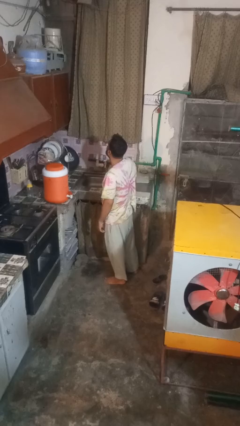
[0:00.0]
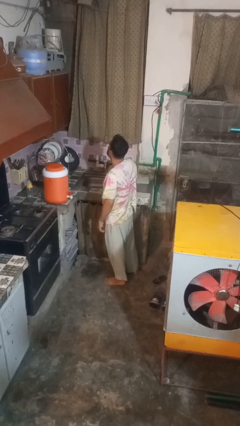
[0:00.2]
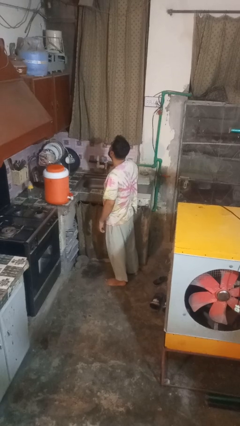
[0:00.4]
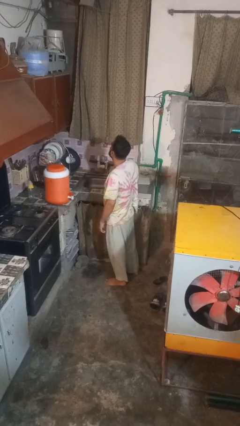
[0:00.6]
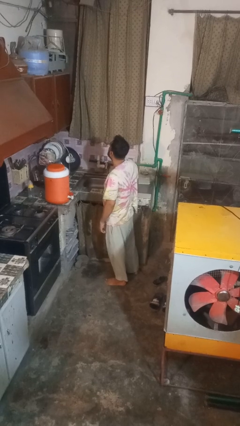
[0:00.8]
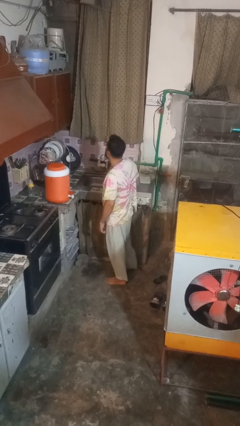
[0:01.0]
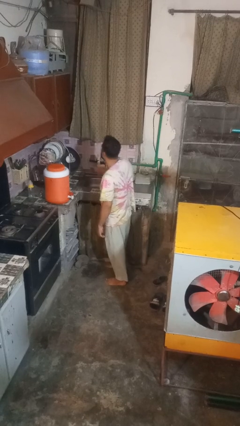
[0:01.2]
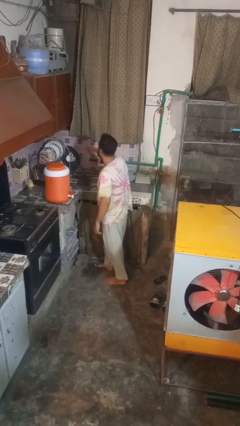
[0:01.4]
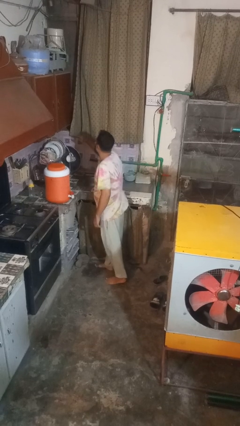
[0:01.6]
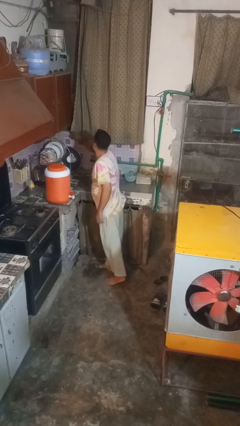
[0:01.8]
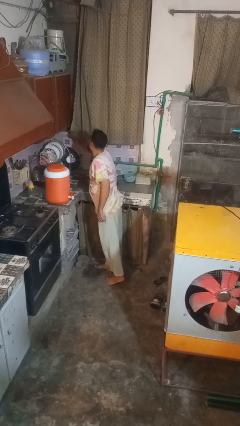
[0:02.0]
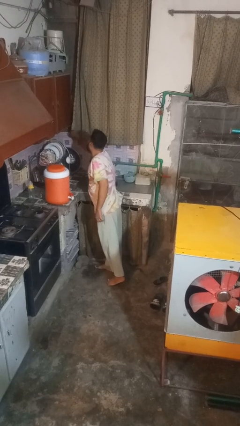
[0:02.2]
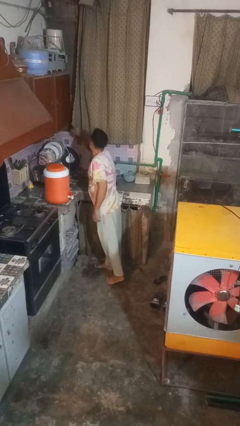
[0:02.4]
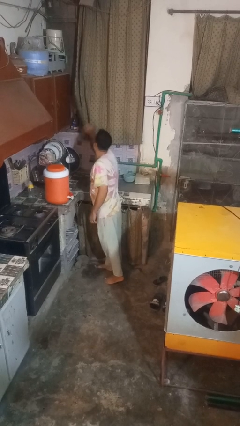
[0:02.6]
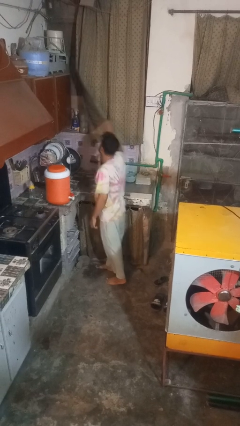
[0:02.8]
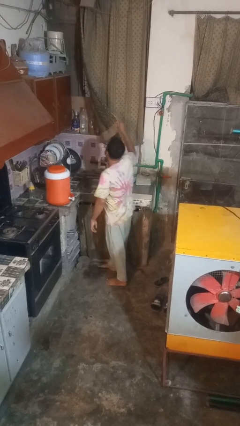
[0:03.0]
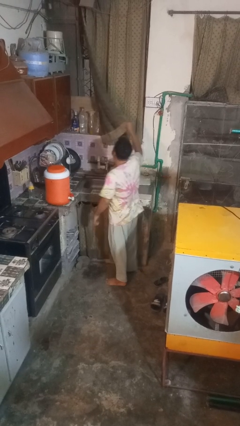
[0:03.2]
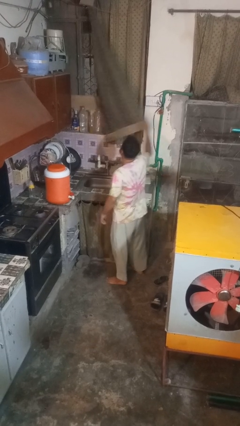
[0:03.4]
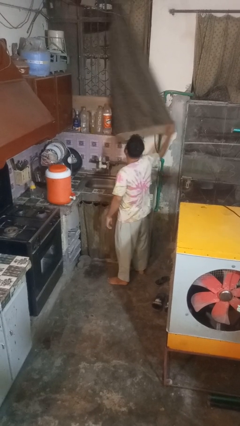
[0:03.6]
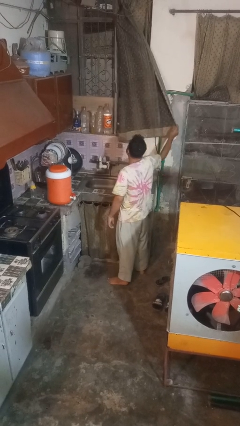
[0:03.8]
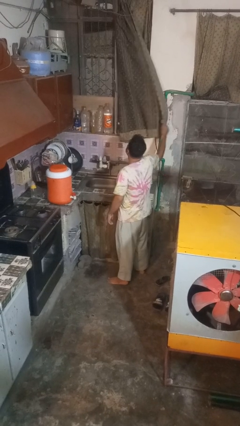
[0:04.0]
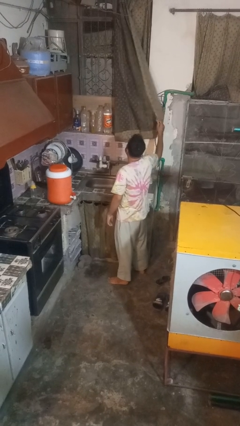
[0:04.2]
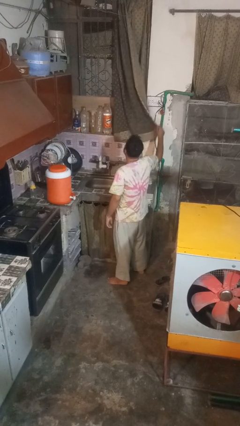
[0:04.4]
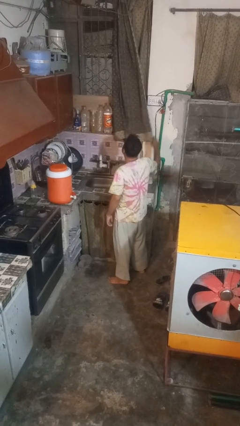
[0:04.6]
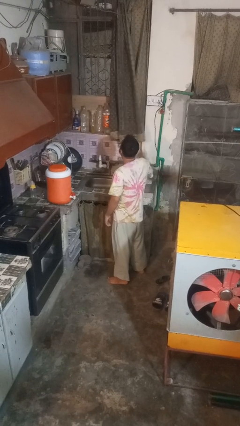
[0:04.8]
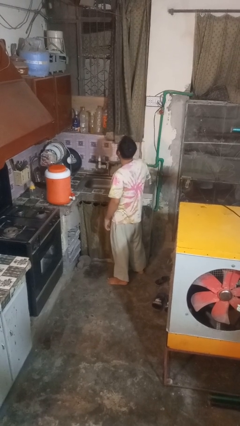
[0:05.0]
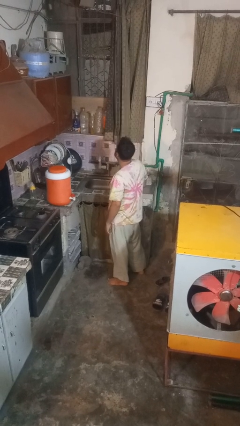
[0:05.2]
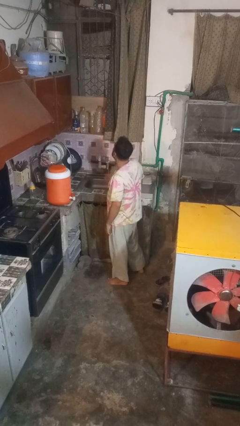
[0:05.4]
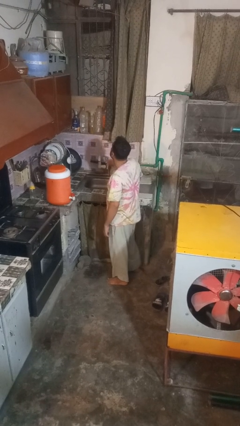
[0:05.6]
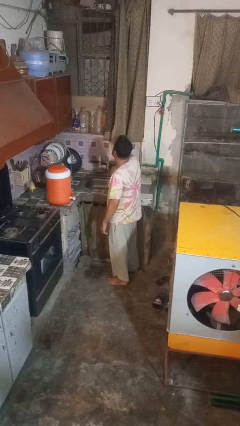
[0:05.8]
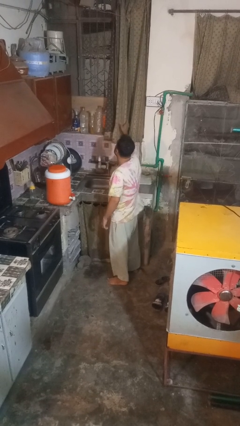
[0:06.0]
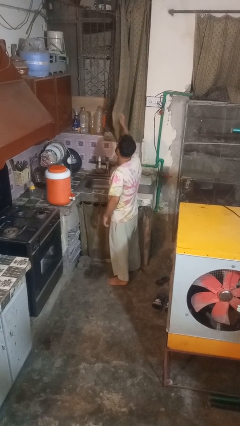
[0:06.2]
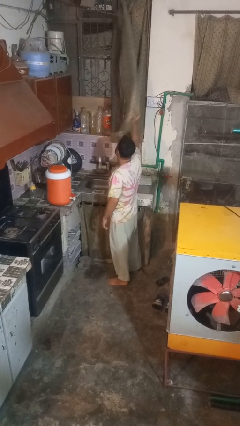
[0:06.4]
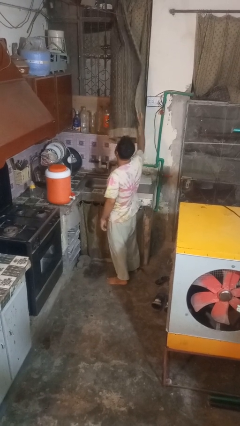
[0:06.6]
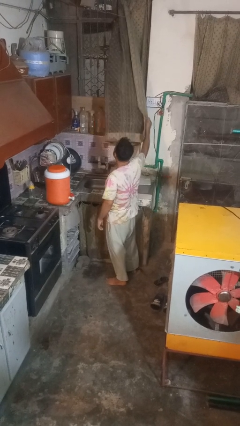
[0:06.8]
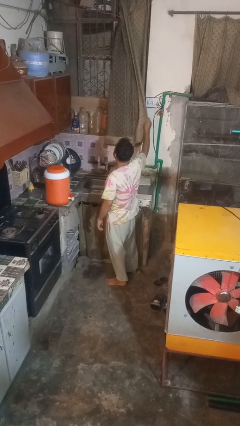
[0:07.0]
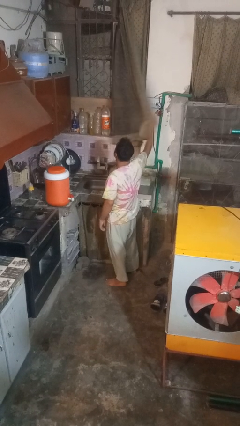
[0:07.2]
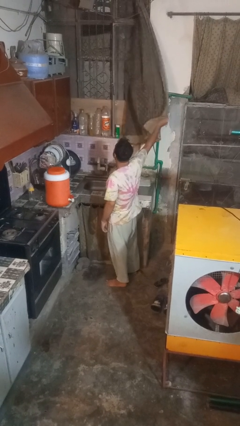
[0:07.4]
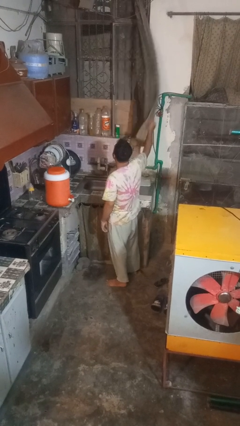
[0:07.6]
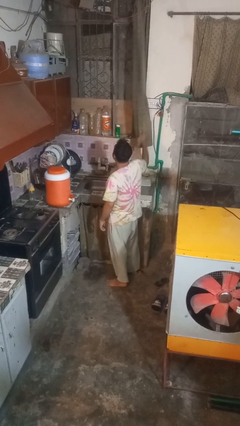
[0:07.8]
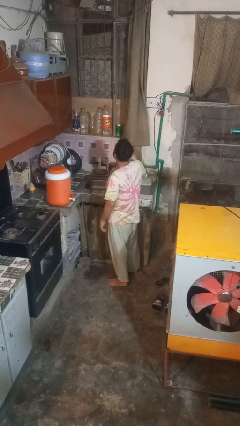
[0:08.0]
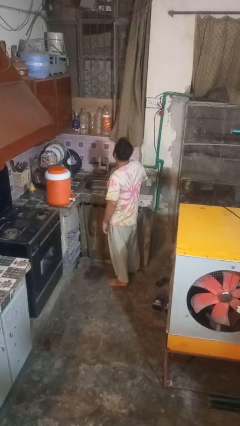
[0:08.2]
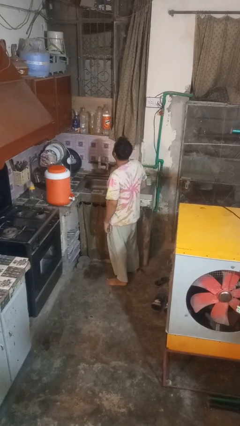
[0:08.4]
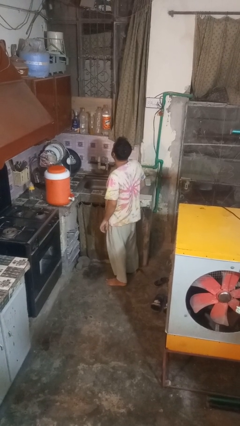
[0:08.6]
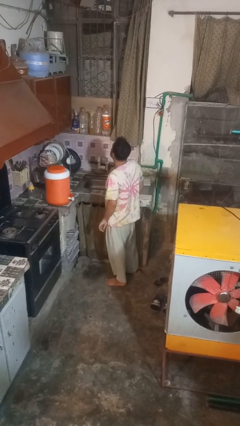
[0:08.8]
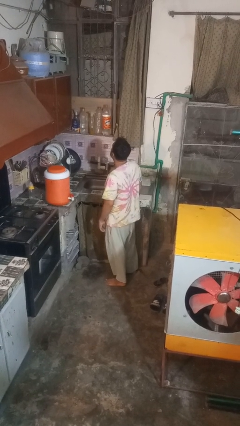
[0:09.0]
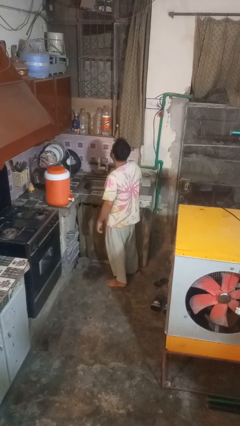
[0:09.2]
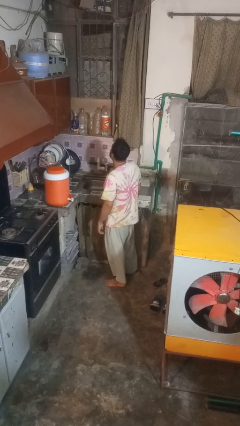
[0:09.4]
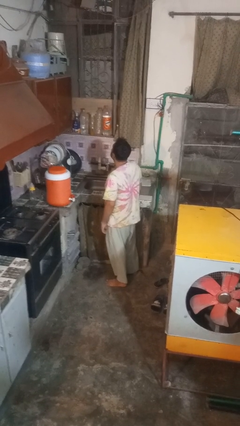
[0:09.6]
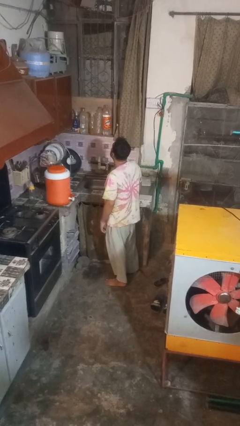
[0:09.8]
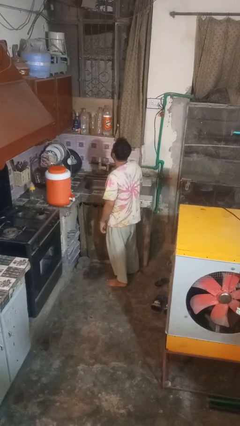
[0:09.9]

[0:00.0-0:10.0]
person opens curtains

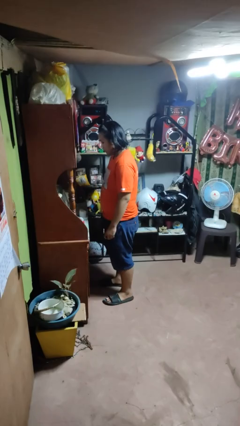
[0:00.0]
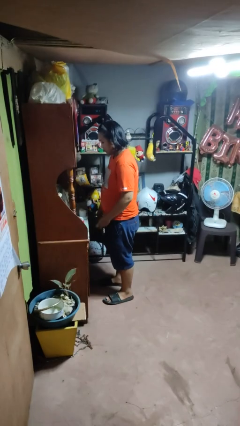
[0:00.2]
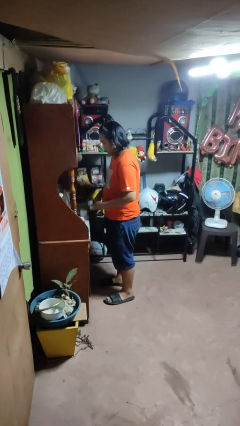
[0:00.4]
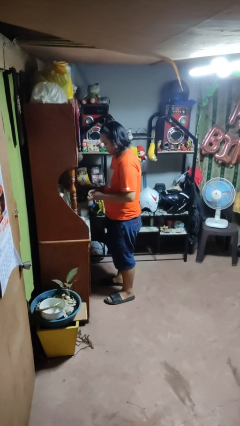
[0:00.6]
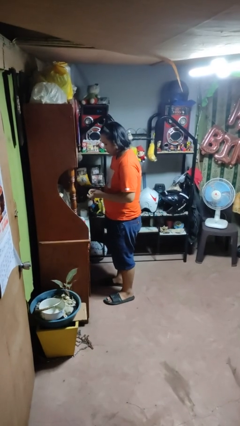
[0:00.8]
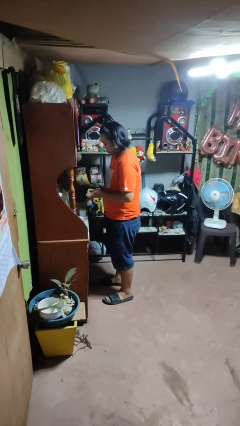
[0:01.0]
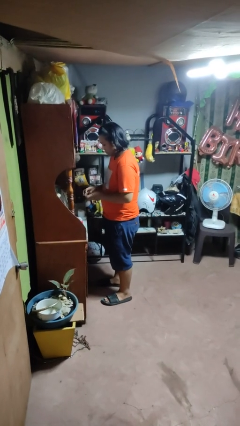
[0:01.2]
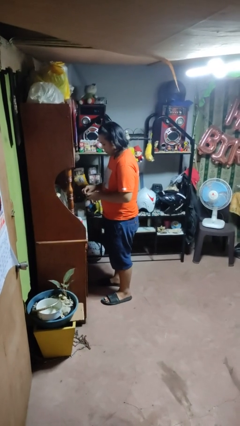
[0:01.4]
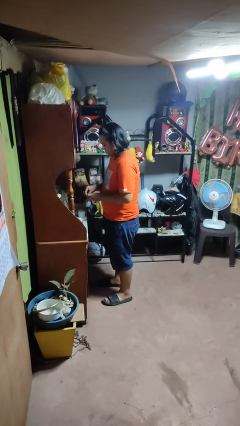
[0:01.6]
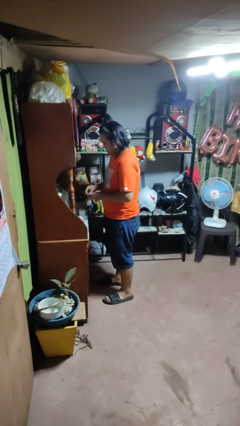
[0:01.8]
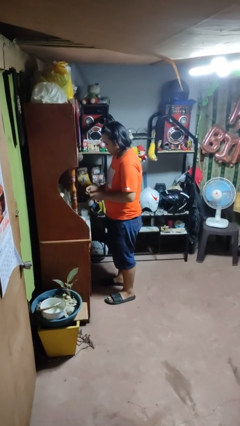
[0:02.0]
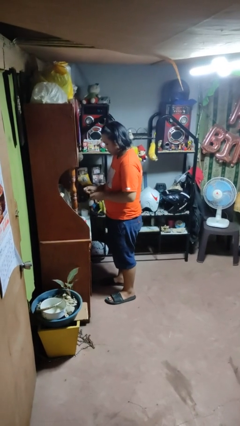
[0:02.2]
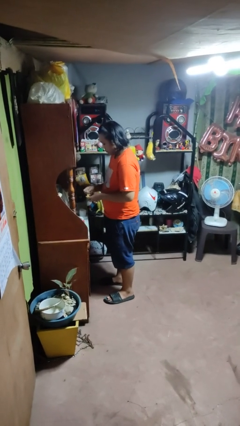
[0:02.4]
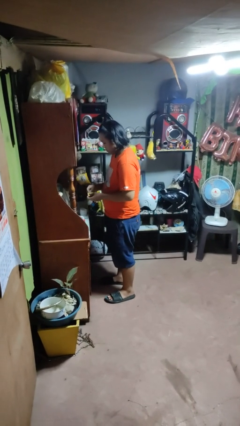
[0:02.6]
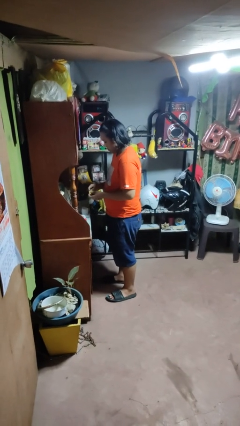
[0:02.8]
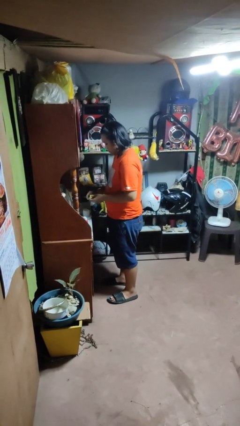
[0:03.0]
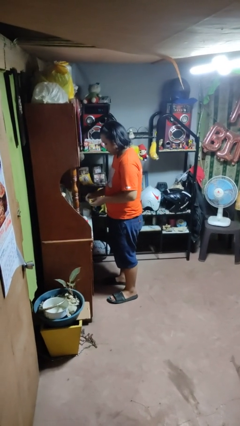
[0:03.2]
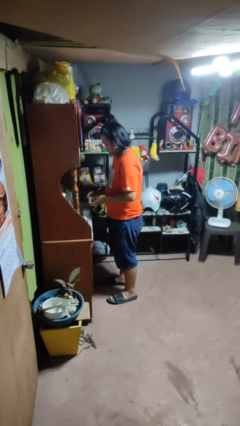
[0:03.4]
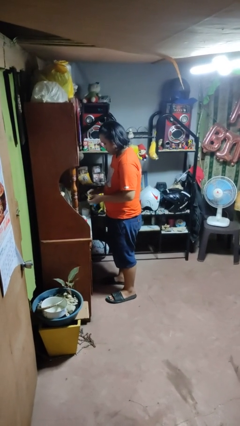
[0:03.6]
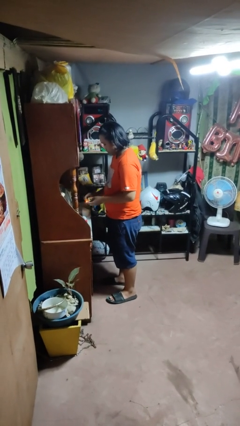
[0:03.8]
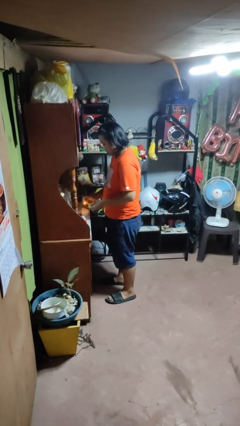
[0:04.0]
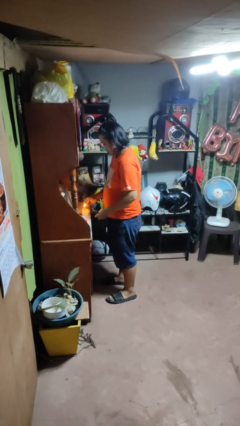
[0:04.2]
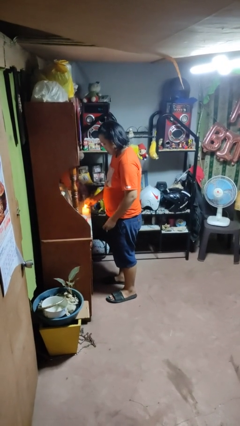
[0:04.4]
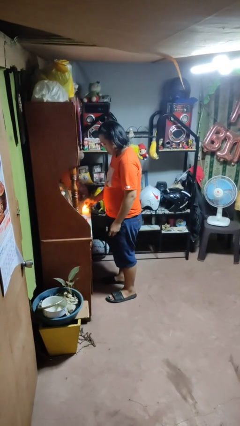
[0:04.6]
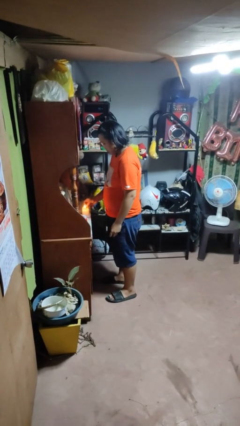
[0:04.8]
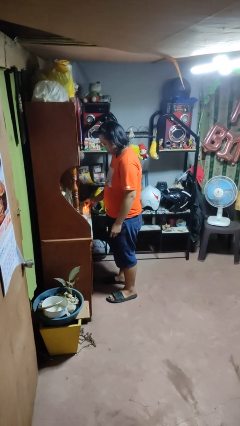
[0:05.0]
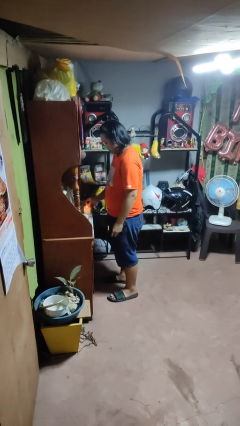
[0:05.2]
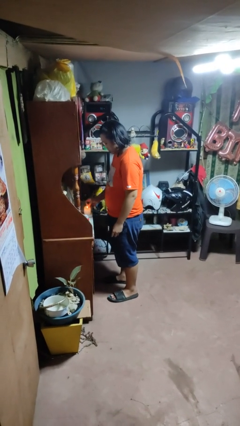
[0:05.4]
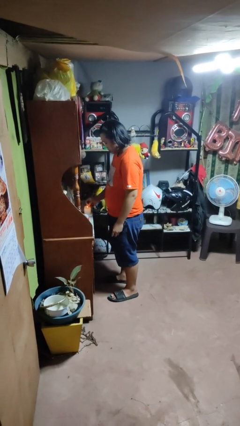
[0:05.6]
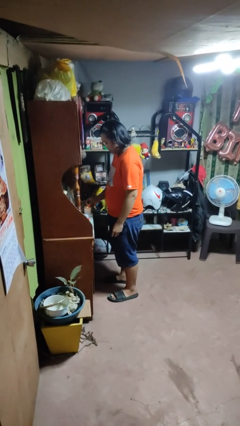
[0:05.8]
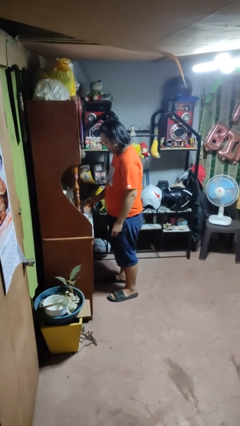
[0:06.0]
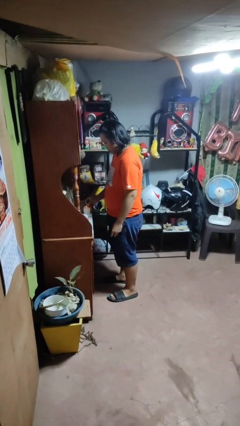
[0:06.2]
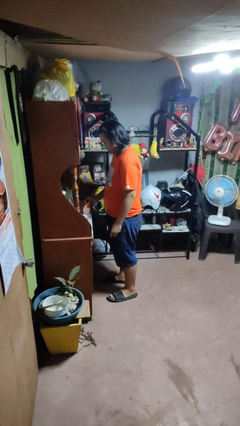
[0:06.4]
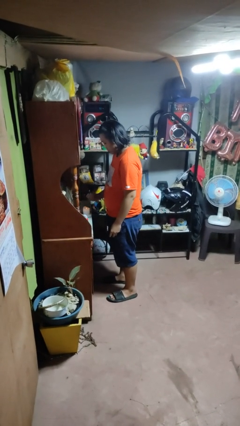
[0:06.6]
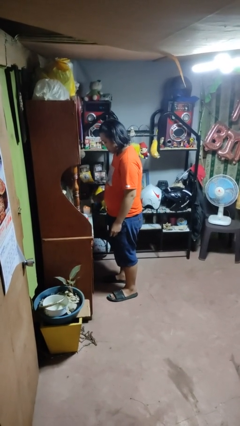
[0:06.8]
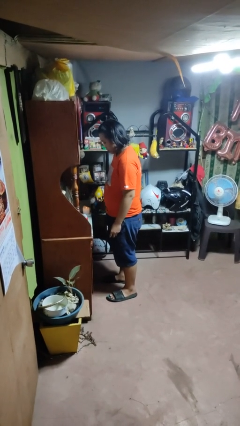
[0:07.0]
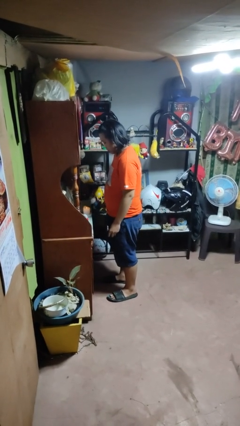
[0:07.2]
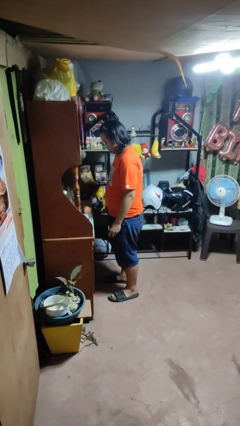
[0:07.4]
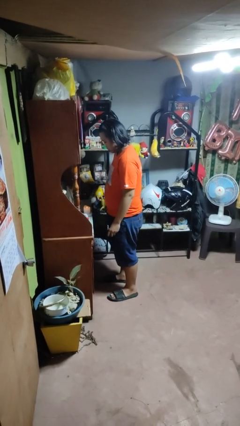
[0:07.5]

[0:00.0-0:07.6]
person lights candle

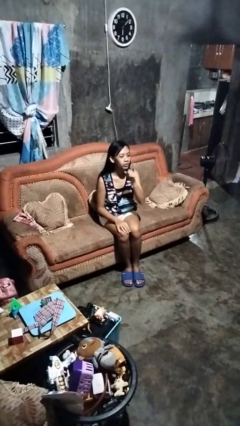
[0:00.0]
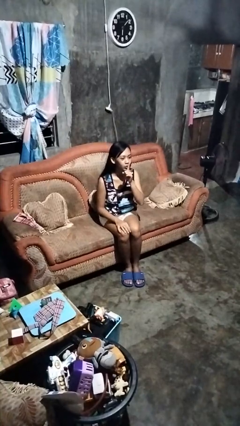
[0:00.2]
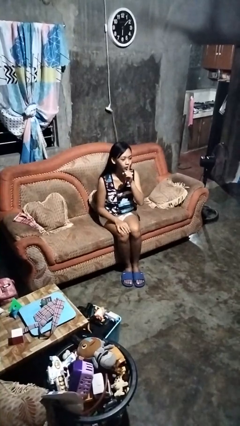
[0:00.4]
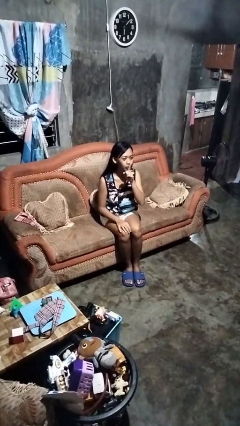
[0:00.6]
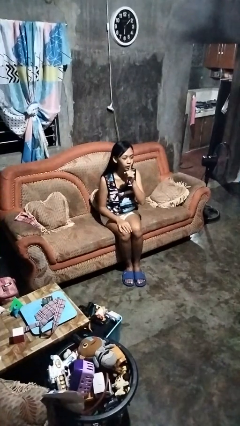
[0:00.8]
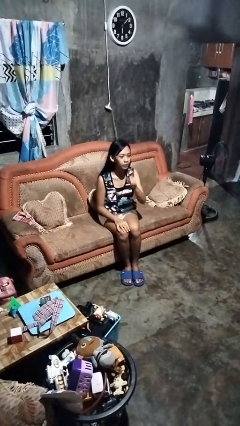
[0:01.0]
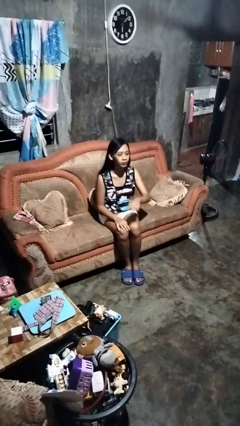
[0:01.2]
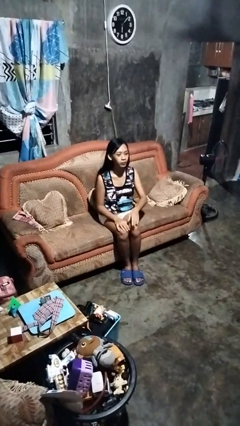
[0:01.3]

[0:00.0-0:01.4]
person gestures be quiet
